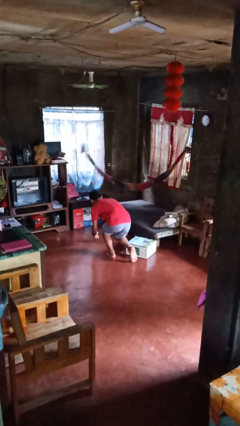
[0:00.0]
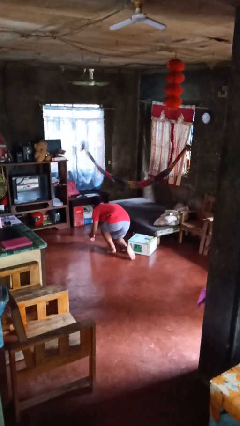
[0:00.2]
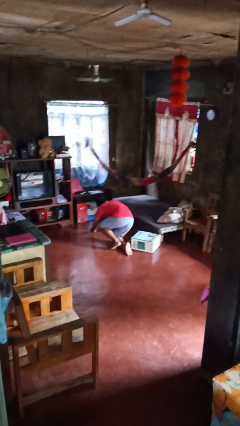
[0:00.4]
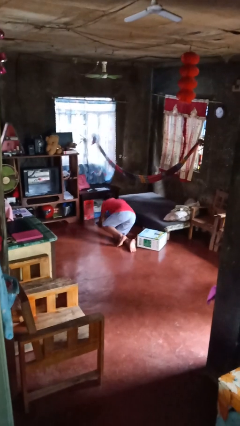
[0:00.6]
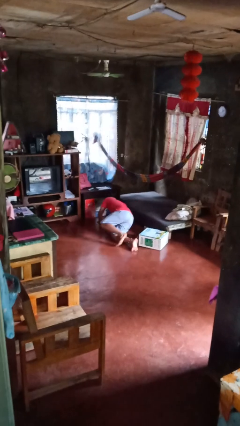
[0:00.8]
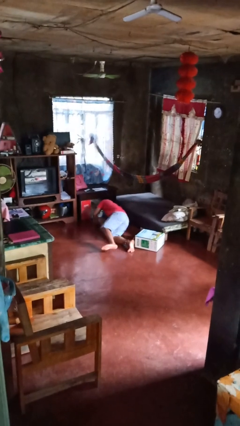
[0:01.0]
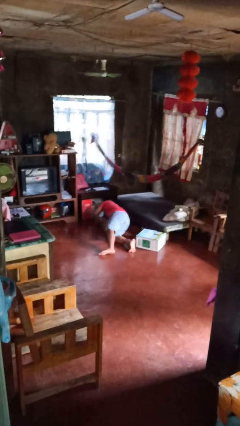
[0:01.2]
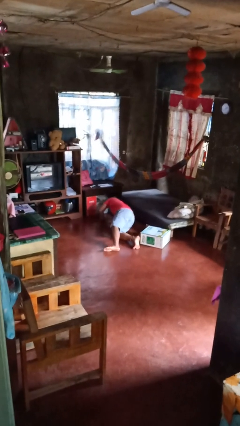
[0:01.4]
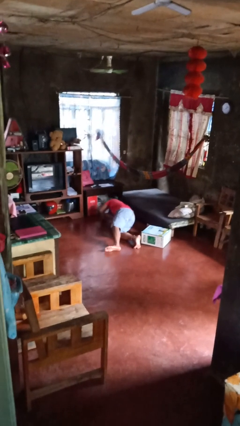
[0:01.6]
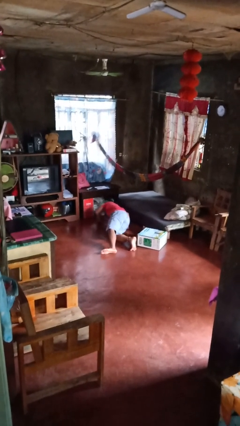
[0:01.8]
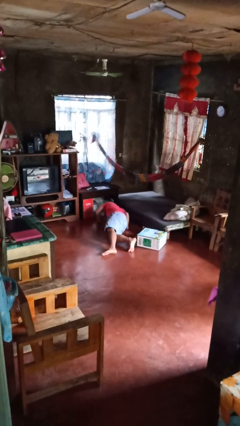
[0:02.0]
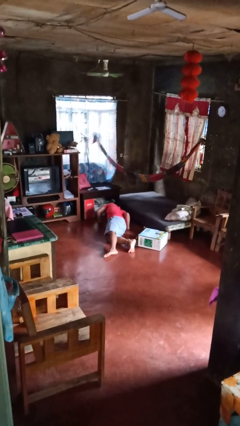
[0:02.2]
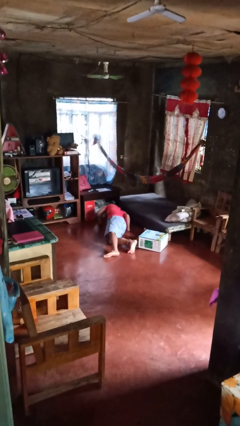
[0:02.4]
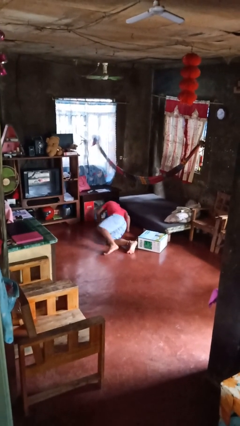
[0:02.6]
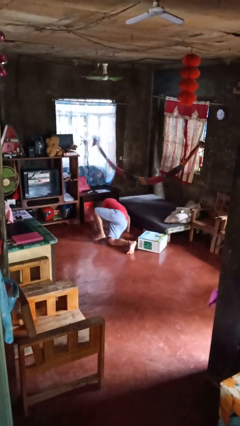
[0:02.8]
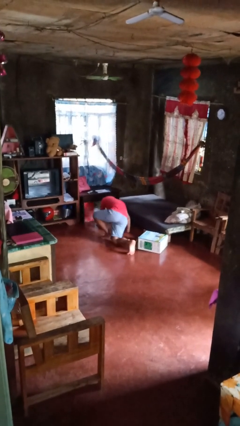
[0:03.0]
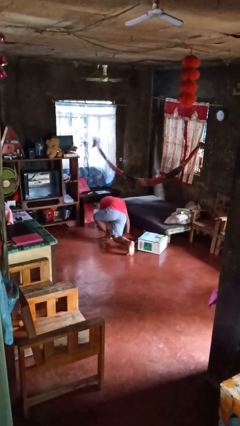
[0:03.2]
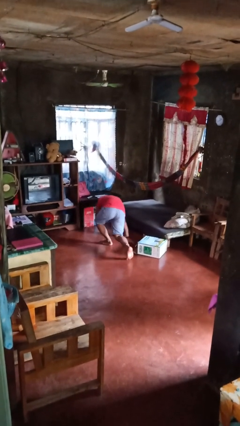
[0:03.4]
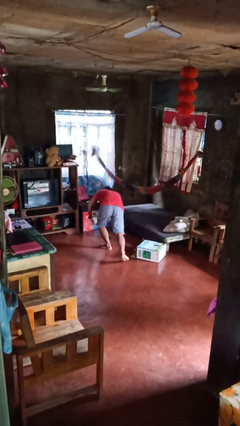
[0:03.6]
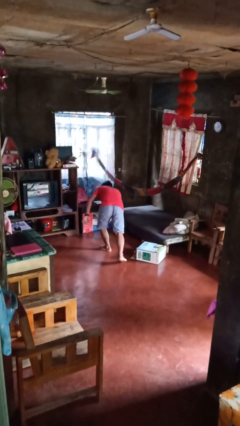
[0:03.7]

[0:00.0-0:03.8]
person trips on object on floor

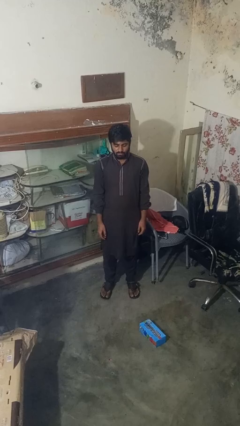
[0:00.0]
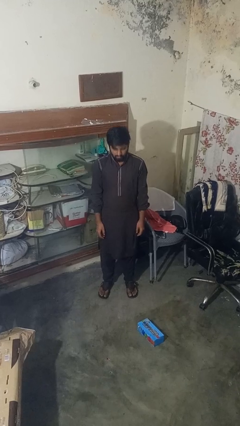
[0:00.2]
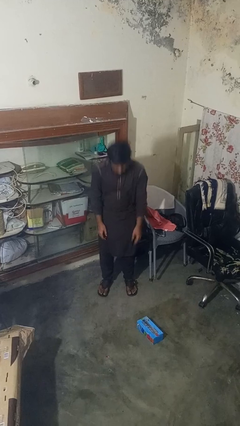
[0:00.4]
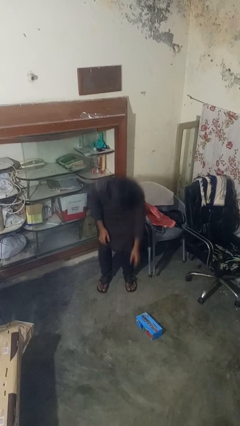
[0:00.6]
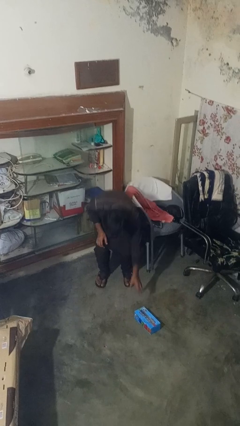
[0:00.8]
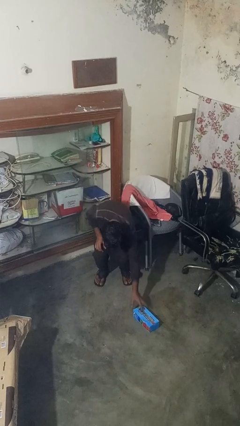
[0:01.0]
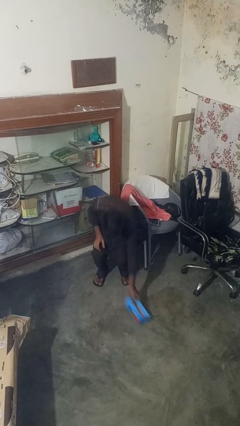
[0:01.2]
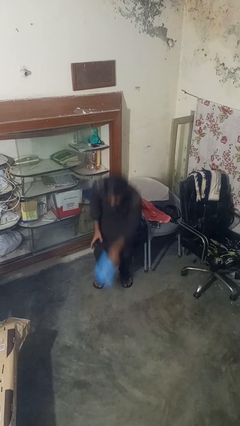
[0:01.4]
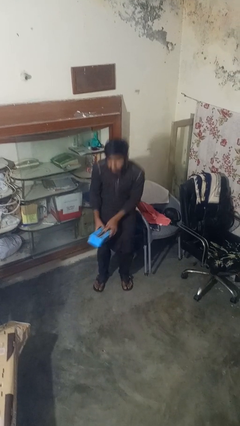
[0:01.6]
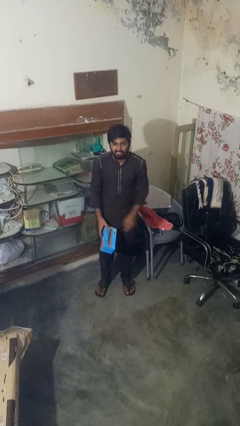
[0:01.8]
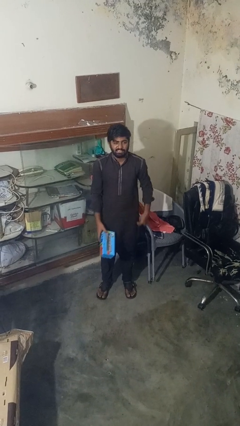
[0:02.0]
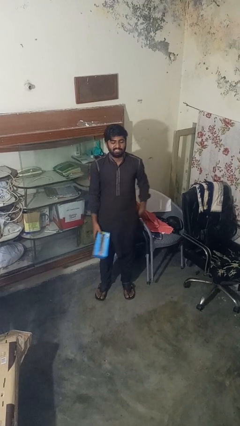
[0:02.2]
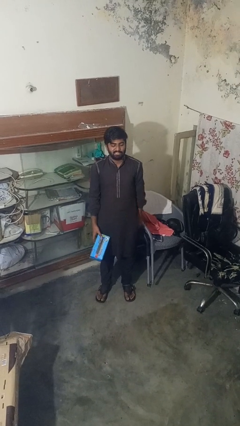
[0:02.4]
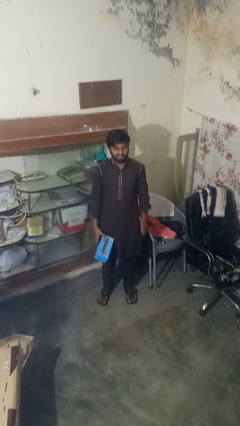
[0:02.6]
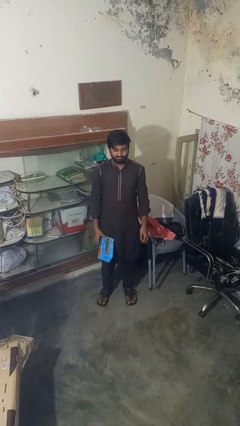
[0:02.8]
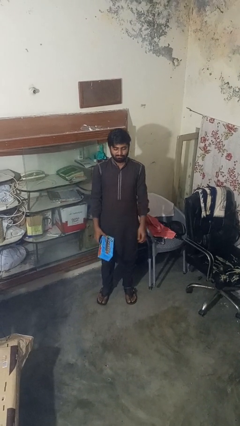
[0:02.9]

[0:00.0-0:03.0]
person picks up object from floor

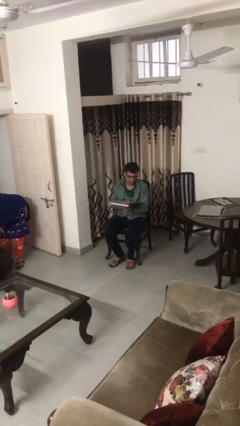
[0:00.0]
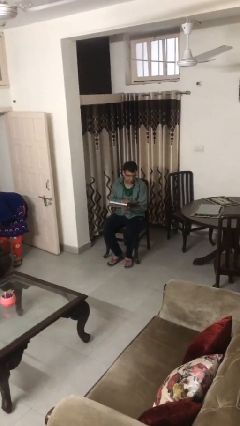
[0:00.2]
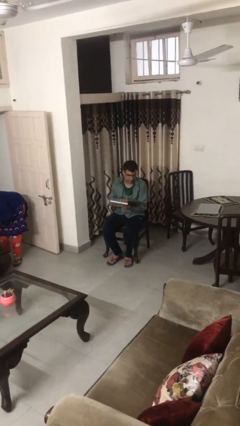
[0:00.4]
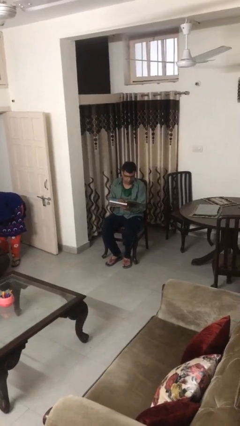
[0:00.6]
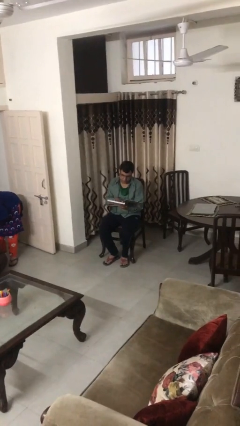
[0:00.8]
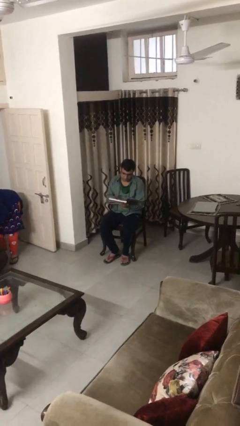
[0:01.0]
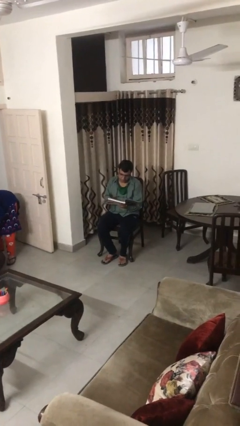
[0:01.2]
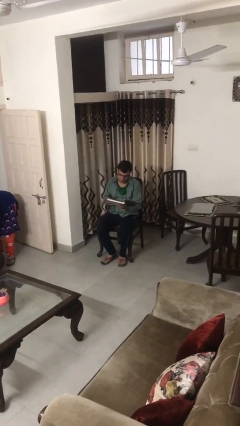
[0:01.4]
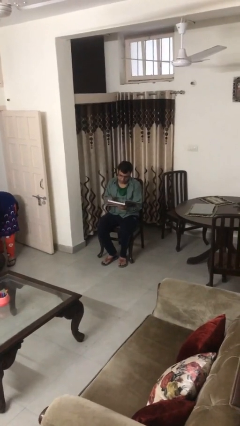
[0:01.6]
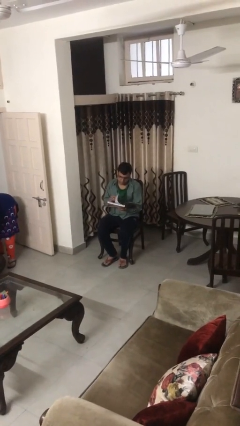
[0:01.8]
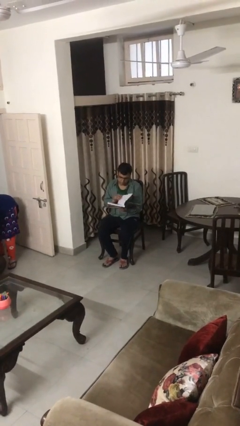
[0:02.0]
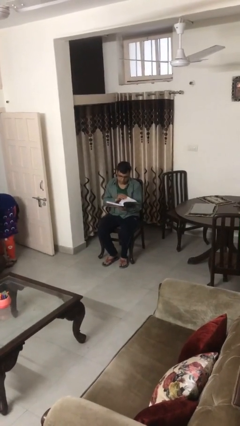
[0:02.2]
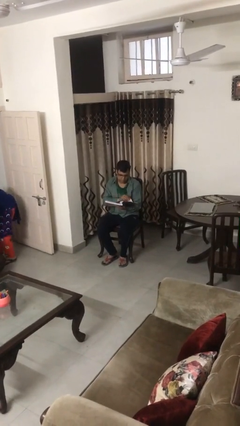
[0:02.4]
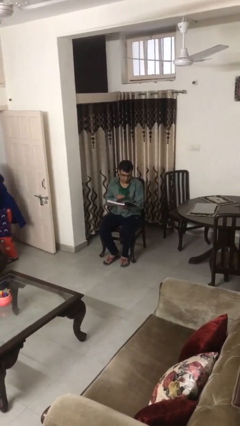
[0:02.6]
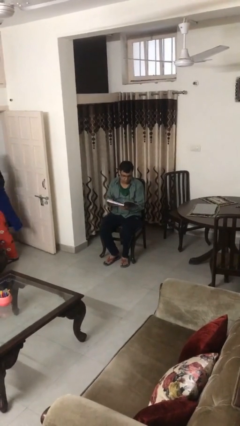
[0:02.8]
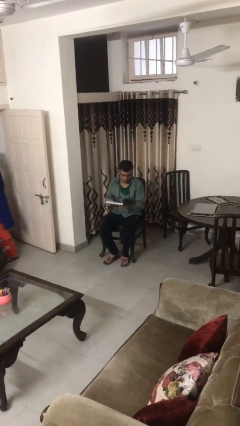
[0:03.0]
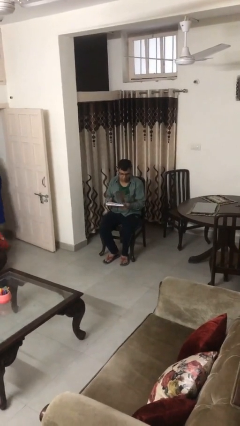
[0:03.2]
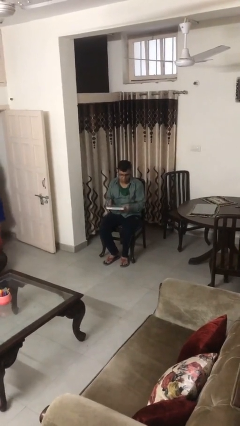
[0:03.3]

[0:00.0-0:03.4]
person reads document

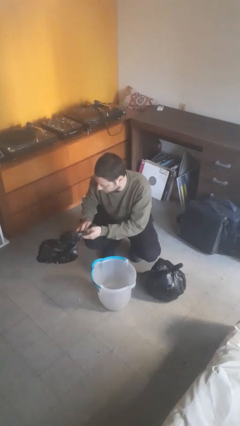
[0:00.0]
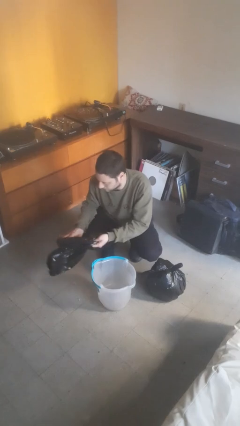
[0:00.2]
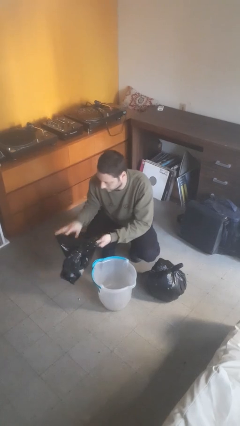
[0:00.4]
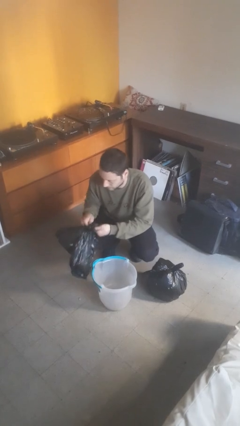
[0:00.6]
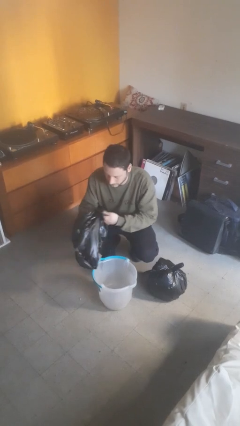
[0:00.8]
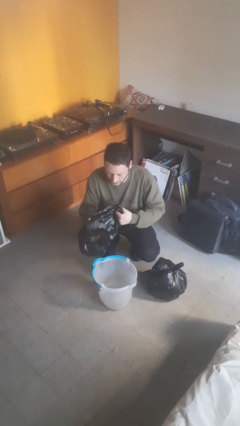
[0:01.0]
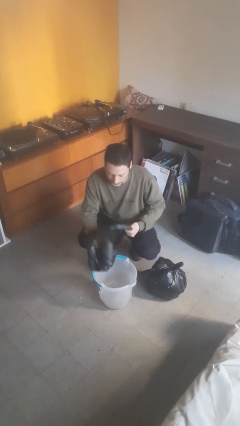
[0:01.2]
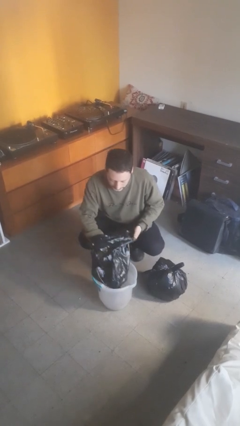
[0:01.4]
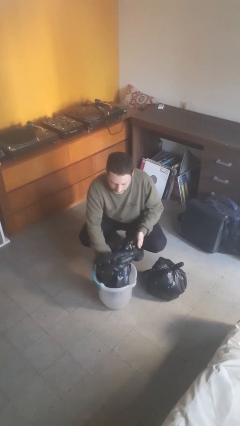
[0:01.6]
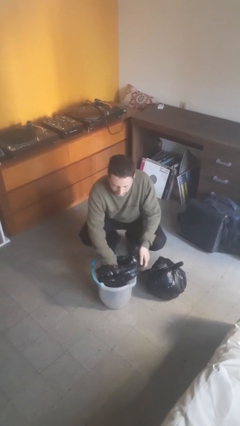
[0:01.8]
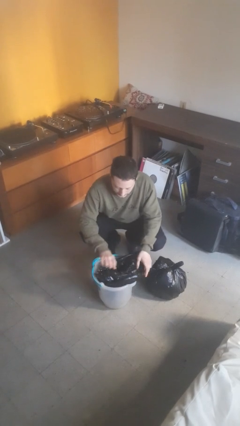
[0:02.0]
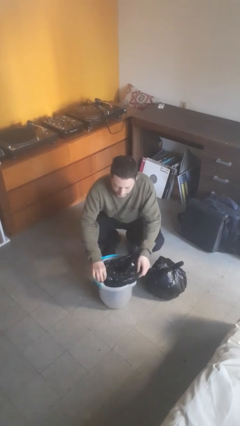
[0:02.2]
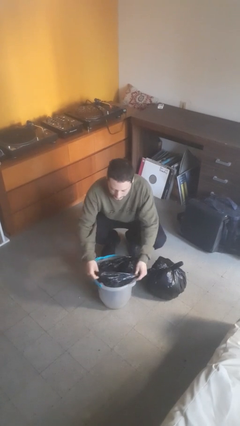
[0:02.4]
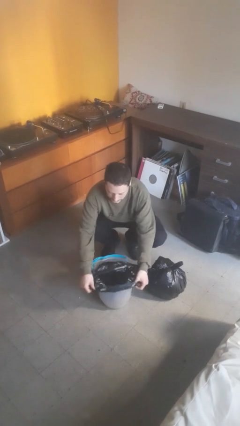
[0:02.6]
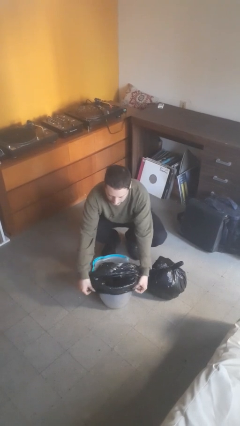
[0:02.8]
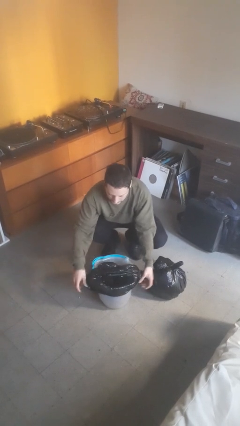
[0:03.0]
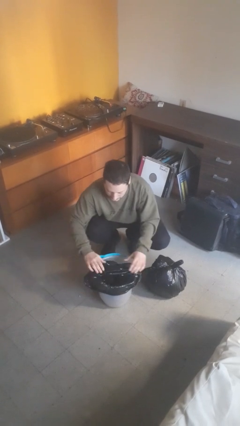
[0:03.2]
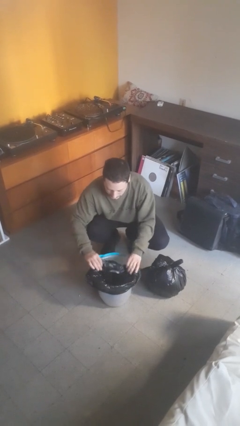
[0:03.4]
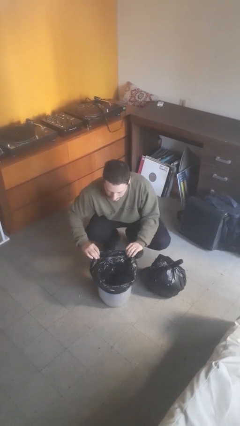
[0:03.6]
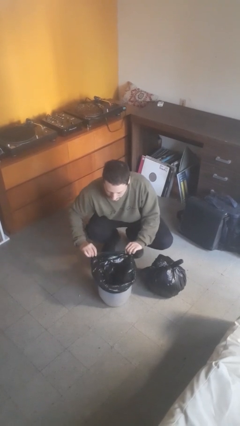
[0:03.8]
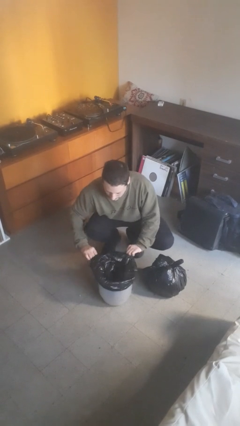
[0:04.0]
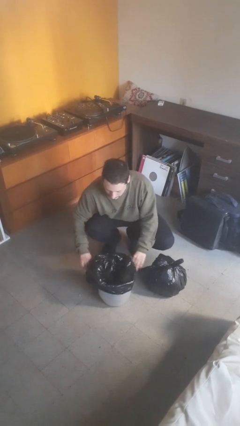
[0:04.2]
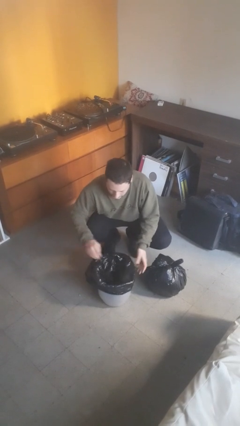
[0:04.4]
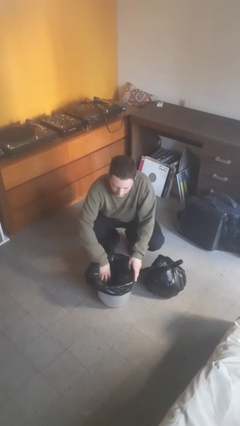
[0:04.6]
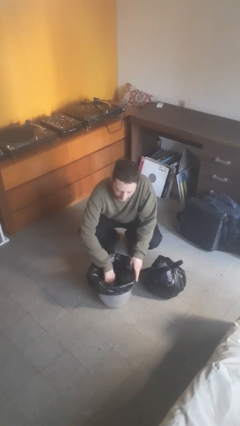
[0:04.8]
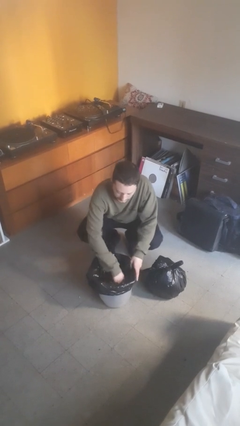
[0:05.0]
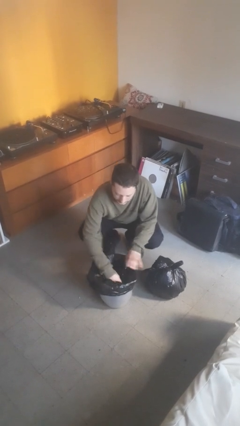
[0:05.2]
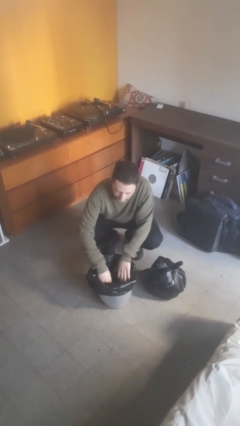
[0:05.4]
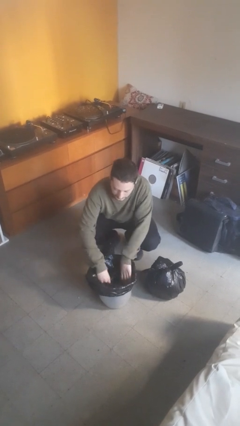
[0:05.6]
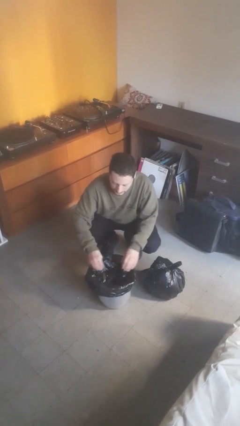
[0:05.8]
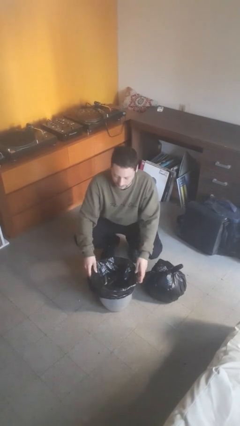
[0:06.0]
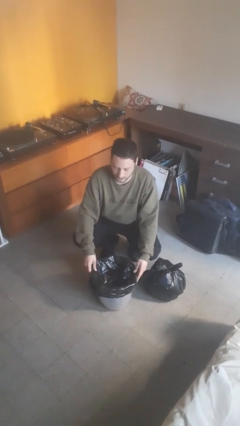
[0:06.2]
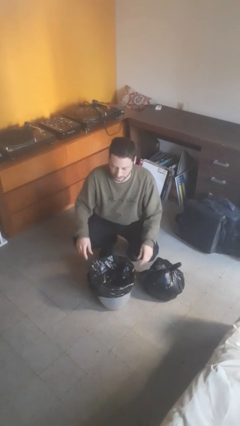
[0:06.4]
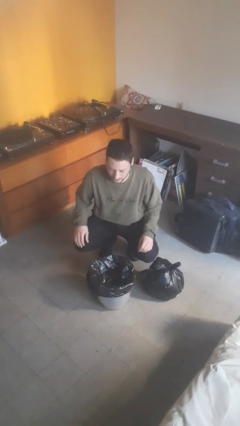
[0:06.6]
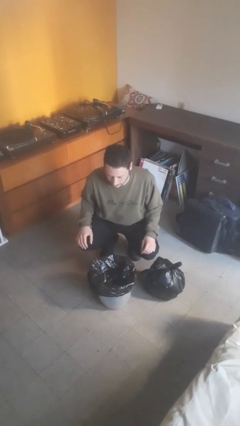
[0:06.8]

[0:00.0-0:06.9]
person inserts trashbag into trashcan

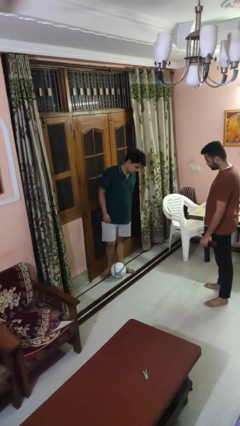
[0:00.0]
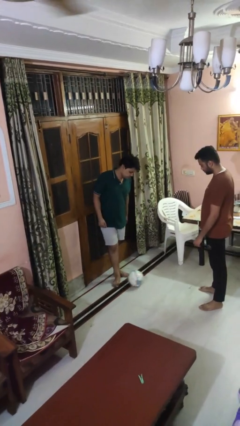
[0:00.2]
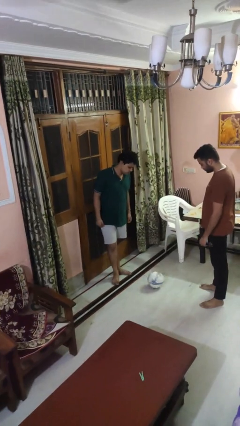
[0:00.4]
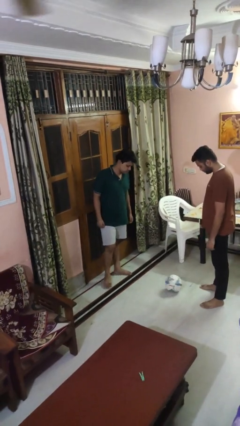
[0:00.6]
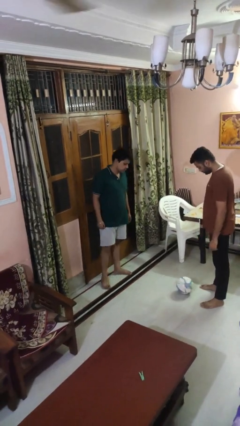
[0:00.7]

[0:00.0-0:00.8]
person kicks object to person
